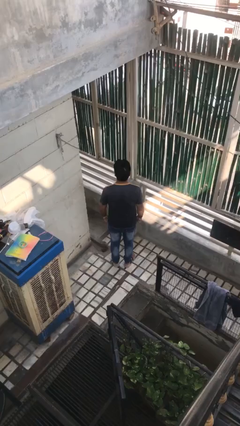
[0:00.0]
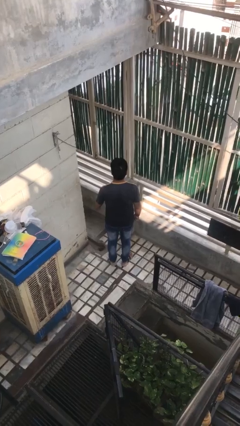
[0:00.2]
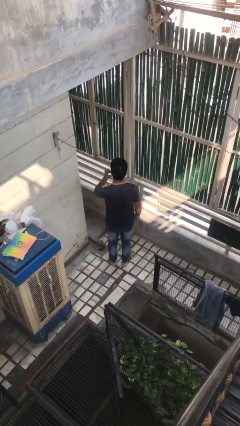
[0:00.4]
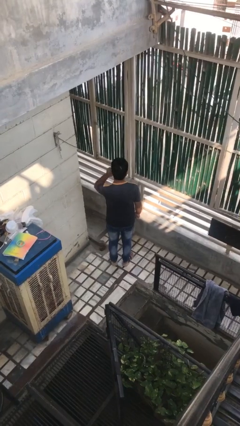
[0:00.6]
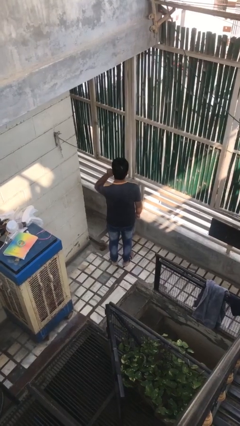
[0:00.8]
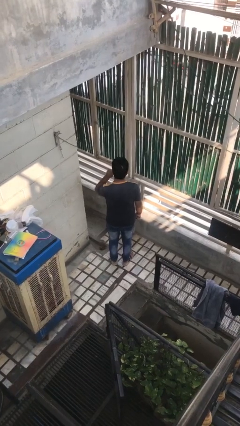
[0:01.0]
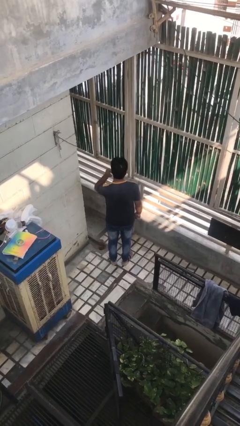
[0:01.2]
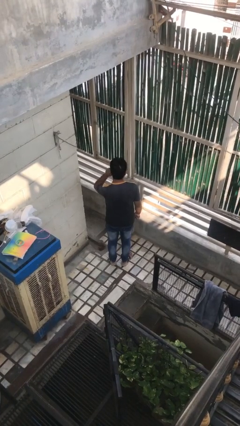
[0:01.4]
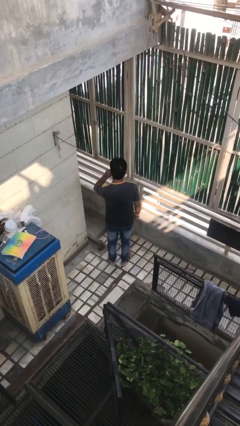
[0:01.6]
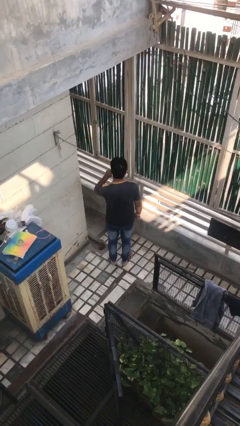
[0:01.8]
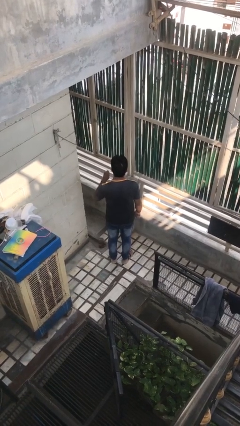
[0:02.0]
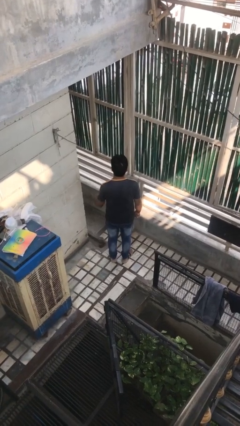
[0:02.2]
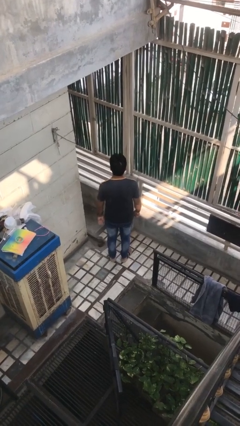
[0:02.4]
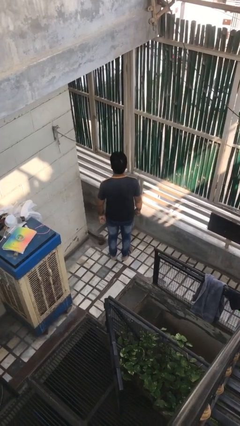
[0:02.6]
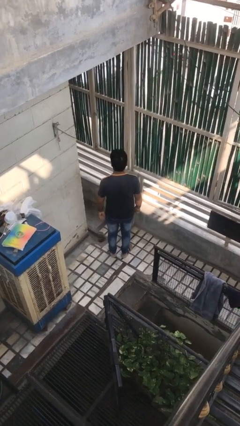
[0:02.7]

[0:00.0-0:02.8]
person touches earlobe

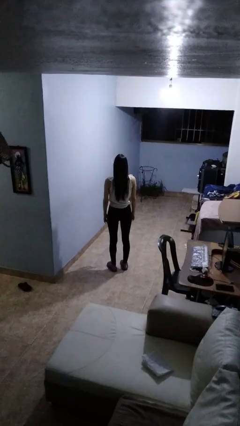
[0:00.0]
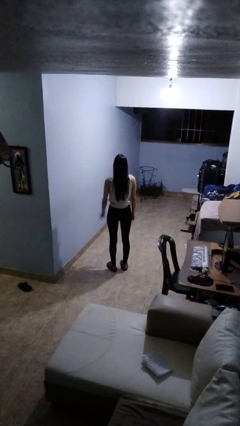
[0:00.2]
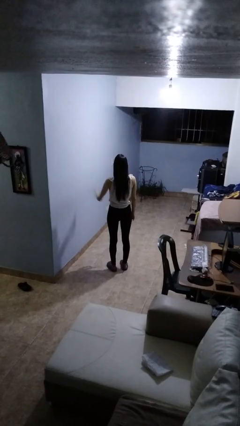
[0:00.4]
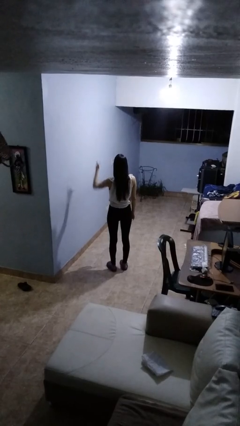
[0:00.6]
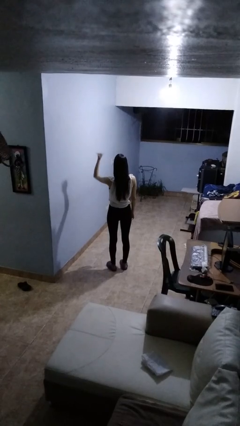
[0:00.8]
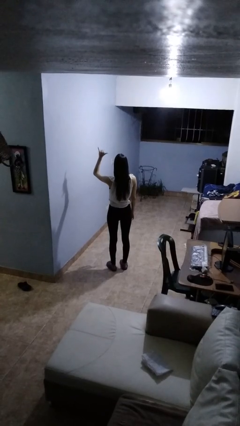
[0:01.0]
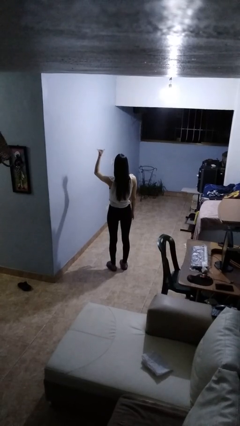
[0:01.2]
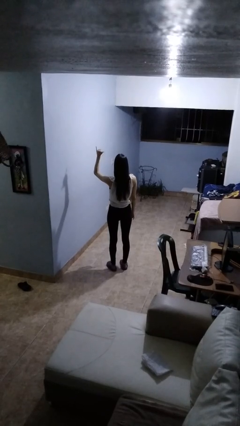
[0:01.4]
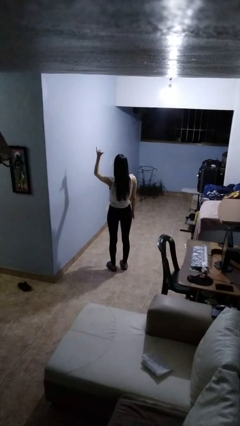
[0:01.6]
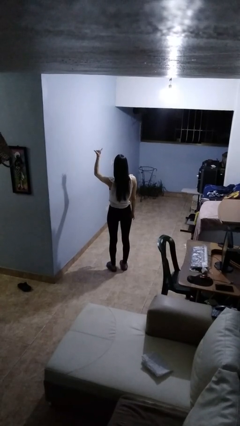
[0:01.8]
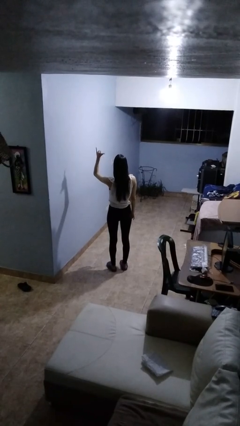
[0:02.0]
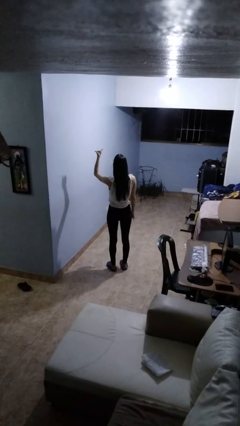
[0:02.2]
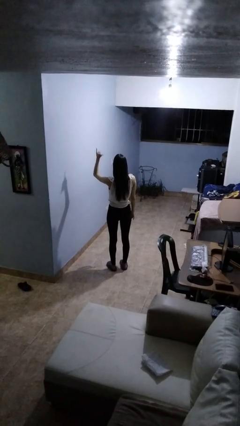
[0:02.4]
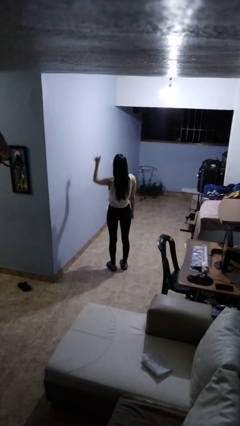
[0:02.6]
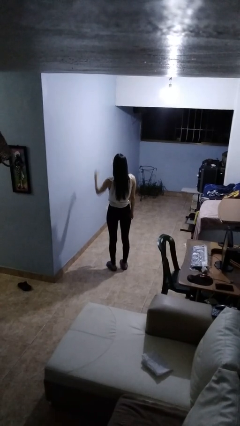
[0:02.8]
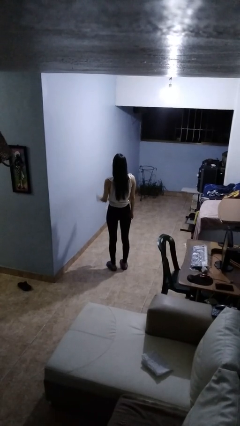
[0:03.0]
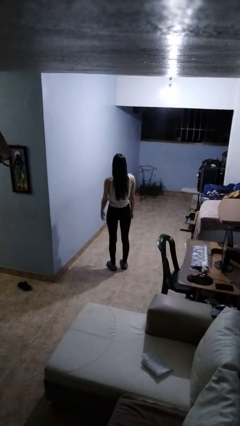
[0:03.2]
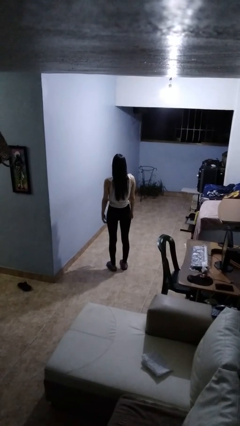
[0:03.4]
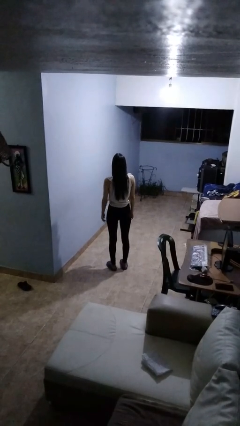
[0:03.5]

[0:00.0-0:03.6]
person gestures hang loose

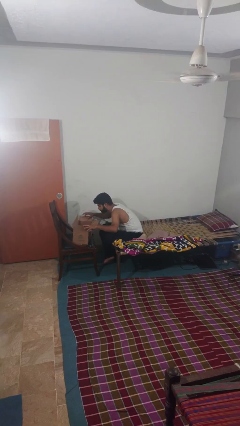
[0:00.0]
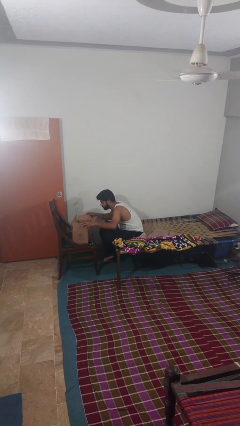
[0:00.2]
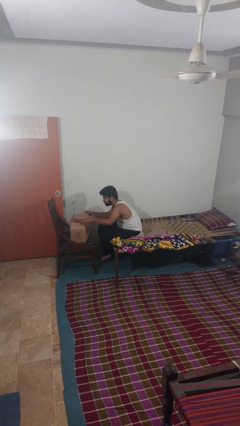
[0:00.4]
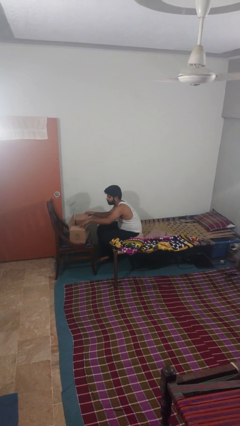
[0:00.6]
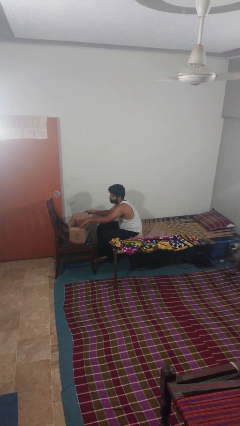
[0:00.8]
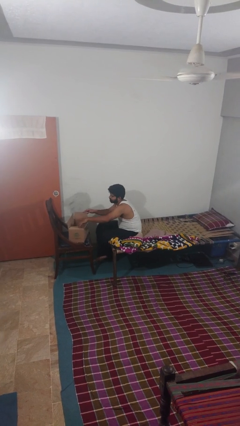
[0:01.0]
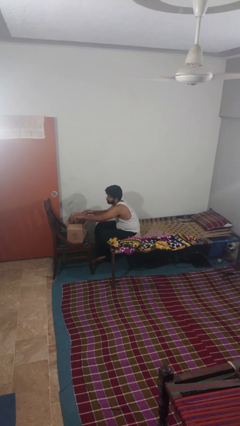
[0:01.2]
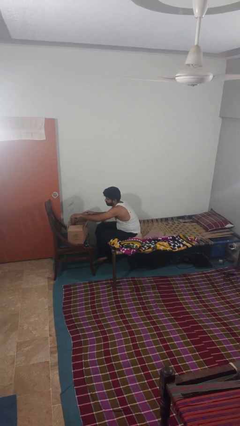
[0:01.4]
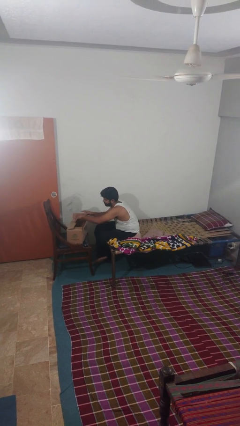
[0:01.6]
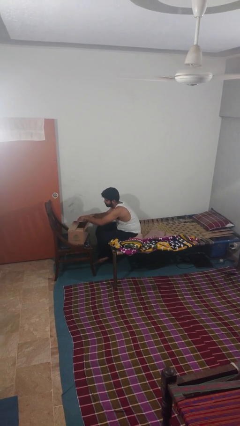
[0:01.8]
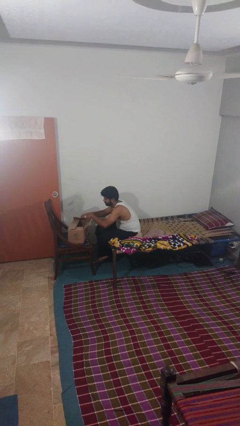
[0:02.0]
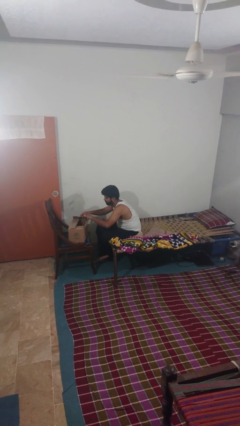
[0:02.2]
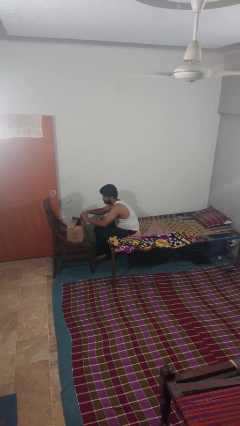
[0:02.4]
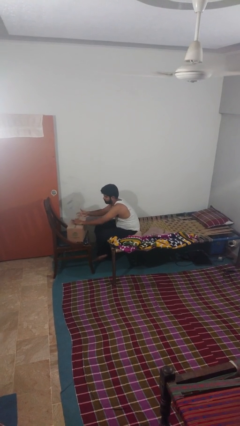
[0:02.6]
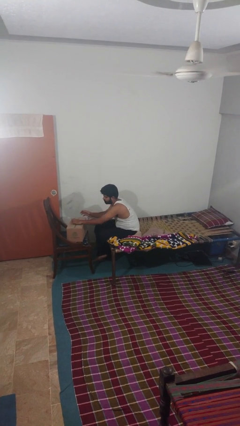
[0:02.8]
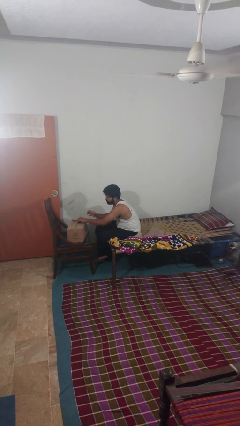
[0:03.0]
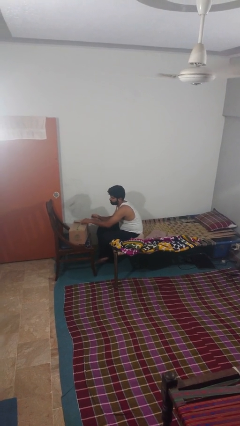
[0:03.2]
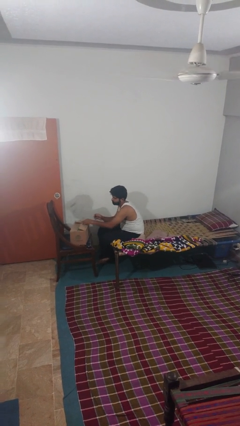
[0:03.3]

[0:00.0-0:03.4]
person closes box

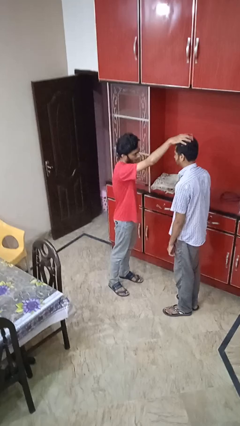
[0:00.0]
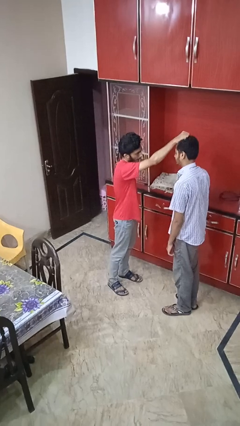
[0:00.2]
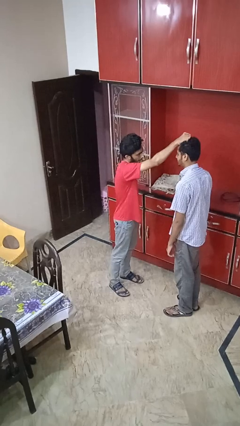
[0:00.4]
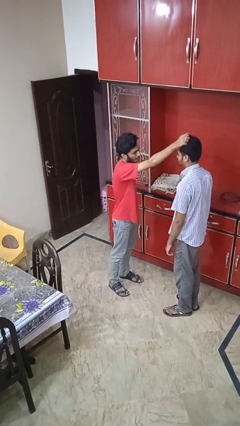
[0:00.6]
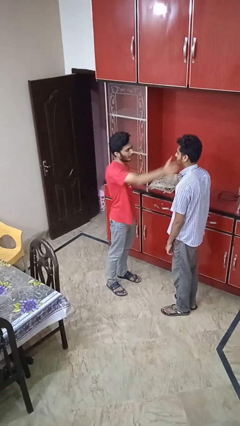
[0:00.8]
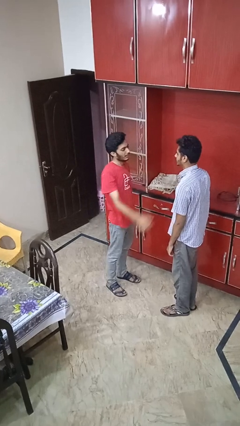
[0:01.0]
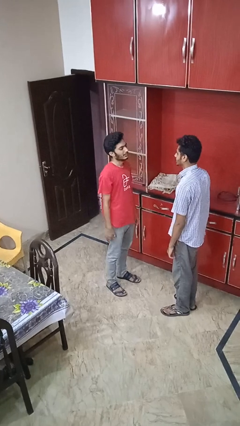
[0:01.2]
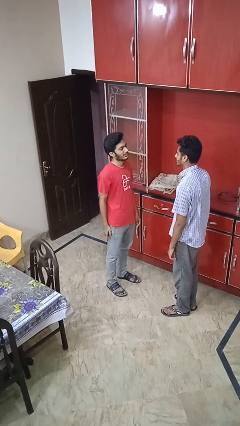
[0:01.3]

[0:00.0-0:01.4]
person grabs person by hair

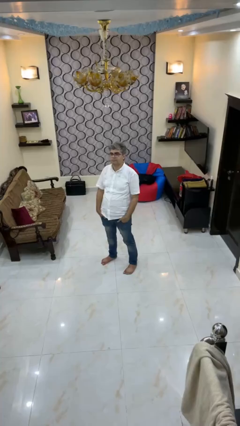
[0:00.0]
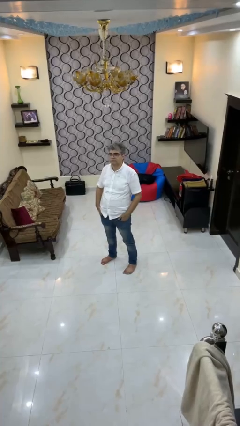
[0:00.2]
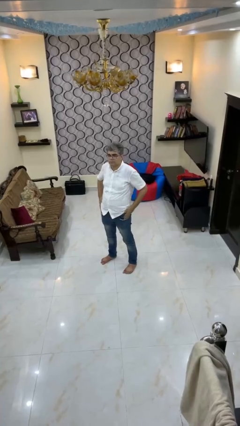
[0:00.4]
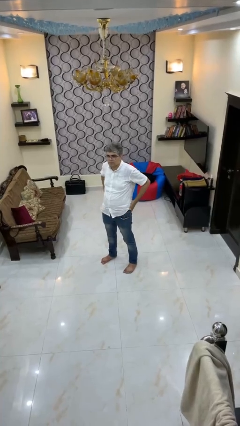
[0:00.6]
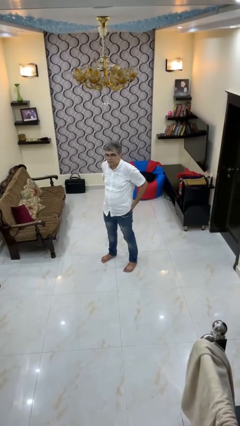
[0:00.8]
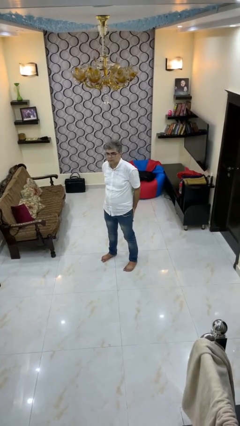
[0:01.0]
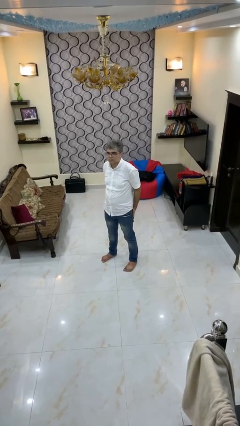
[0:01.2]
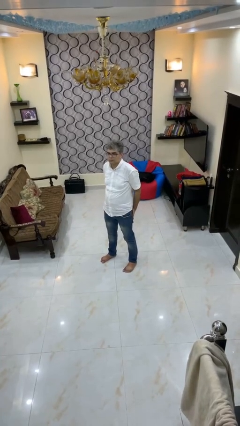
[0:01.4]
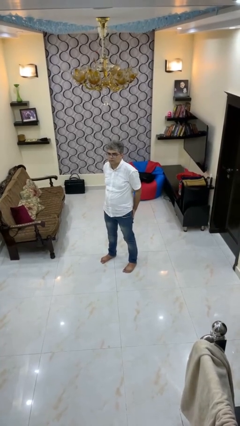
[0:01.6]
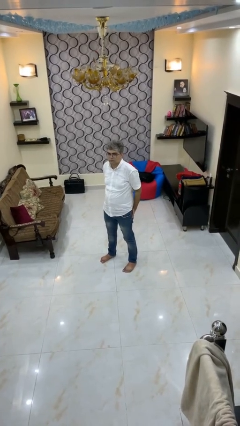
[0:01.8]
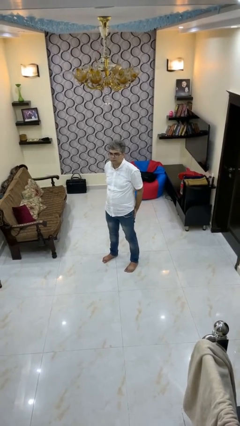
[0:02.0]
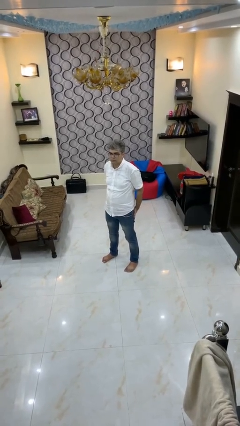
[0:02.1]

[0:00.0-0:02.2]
person puts hands in back pockets

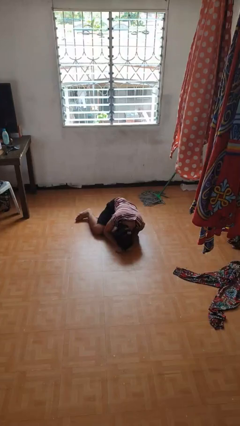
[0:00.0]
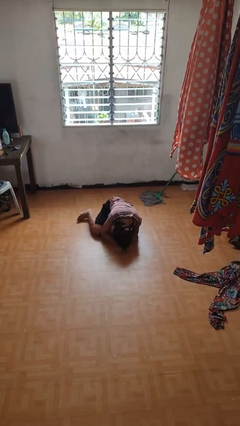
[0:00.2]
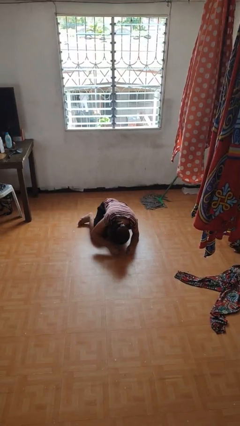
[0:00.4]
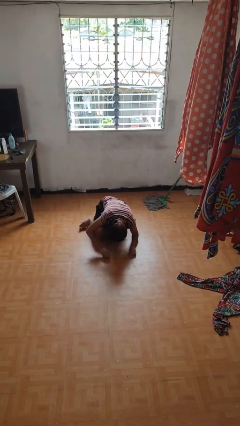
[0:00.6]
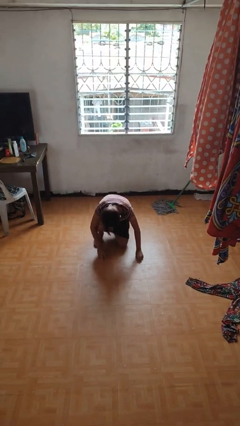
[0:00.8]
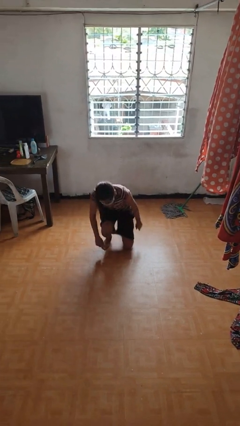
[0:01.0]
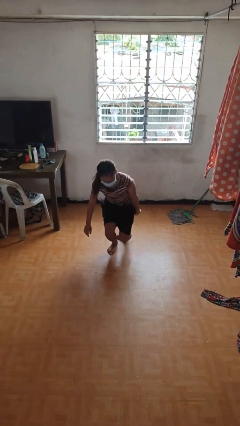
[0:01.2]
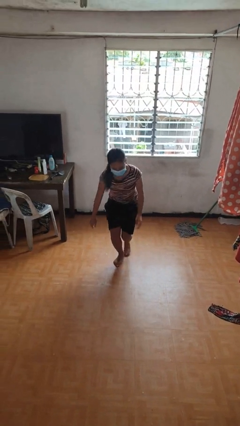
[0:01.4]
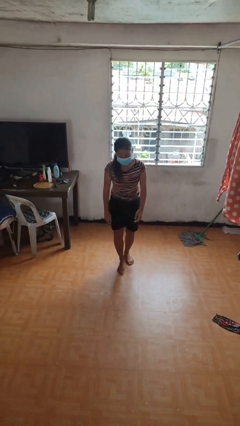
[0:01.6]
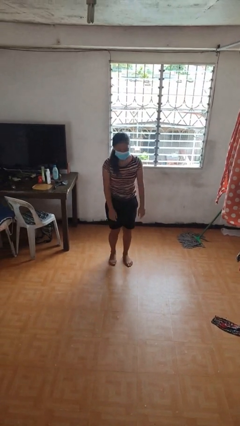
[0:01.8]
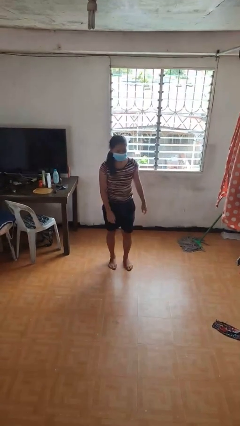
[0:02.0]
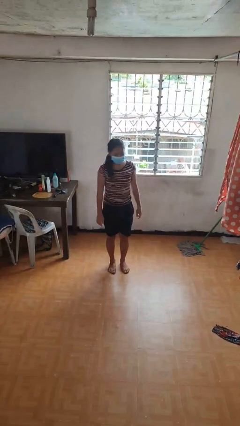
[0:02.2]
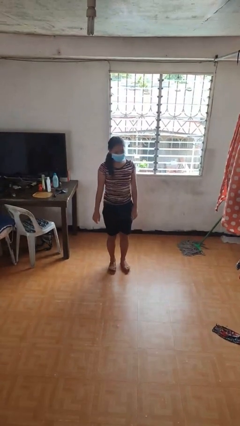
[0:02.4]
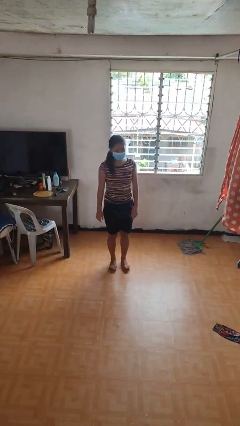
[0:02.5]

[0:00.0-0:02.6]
person stands up from floor

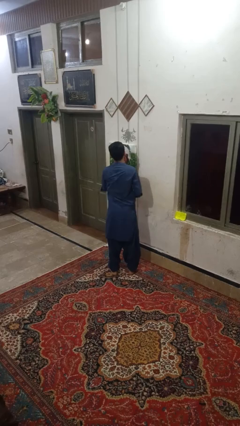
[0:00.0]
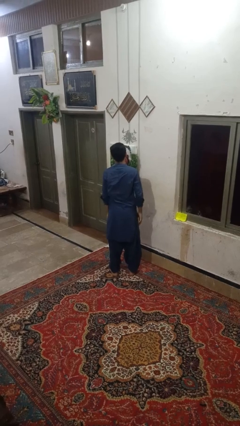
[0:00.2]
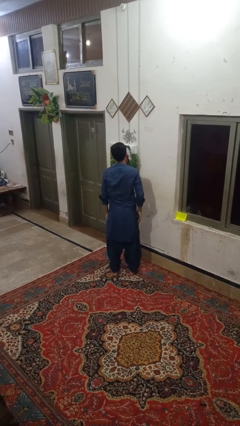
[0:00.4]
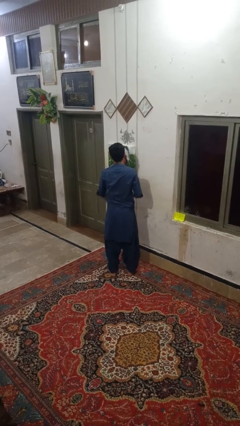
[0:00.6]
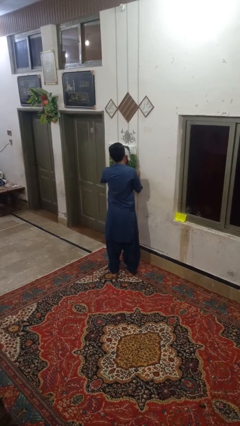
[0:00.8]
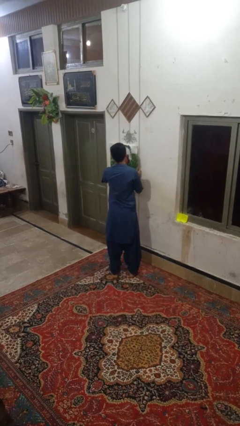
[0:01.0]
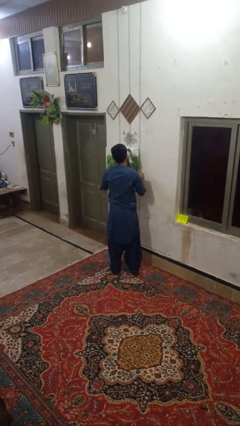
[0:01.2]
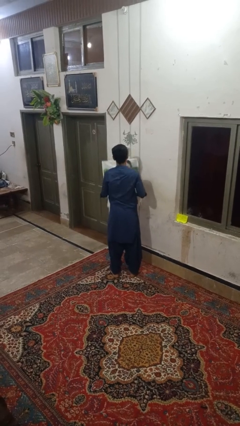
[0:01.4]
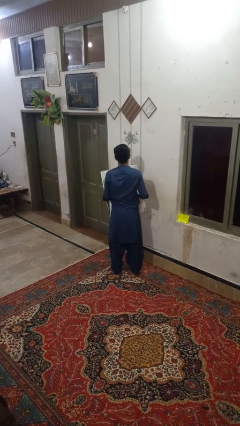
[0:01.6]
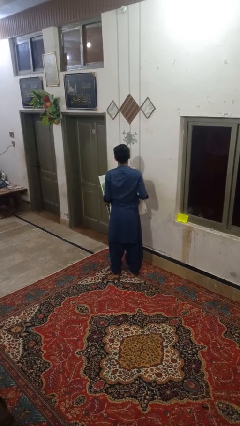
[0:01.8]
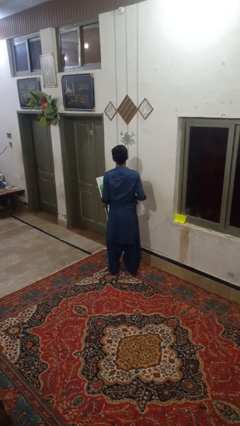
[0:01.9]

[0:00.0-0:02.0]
person takes down picture frame
